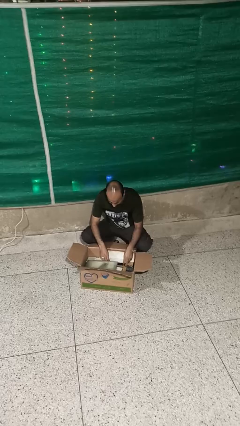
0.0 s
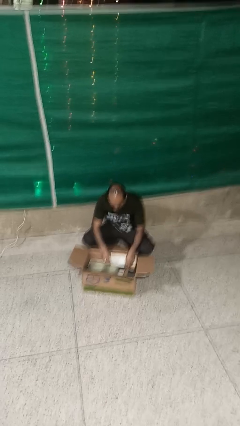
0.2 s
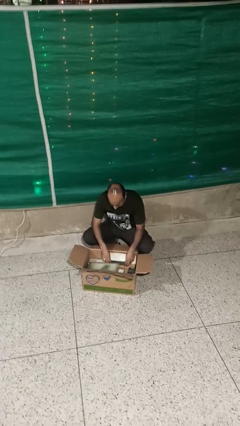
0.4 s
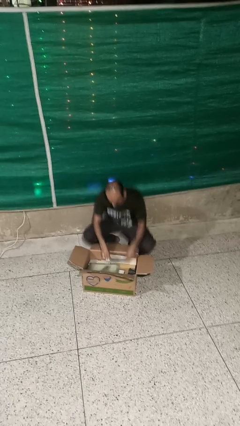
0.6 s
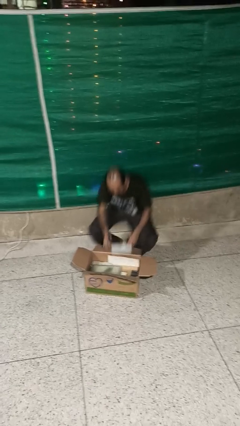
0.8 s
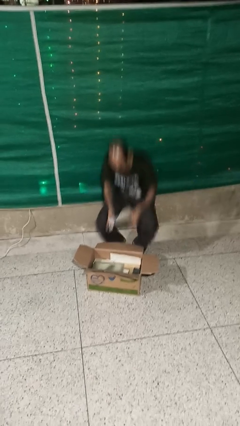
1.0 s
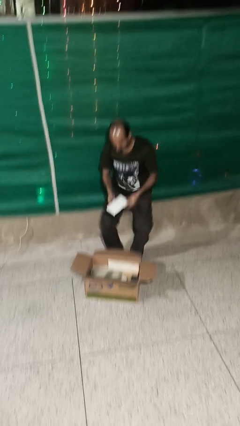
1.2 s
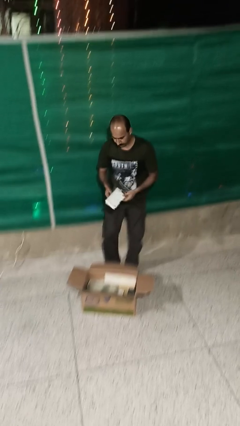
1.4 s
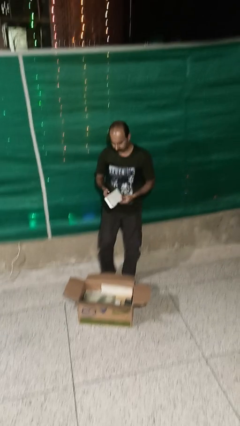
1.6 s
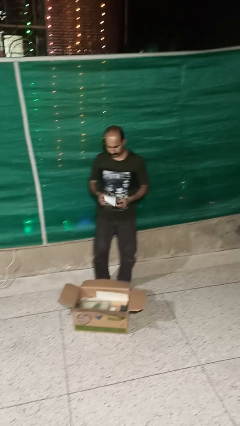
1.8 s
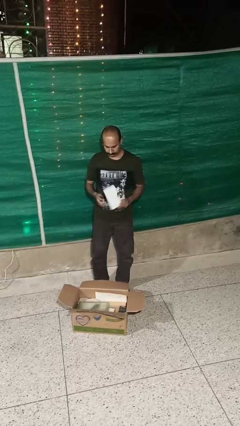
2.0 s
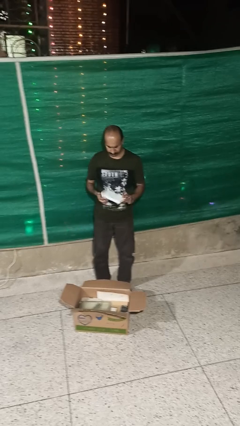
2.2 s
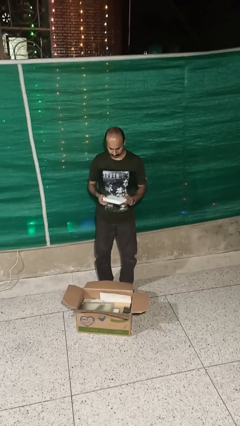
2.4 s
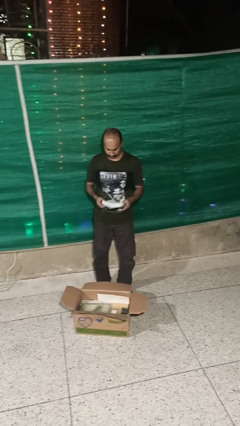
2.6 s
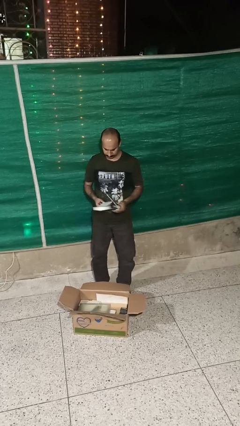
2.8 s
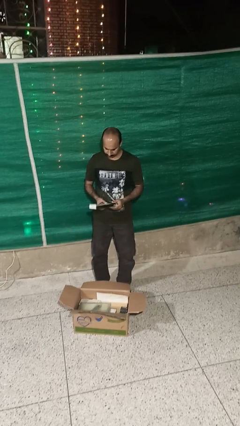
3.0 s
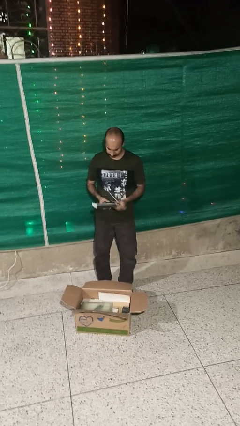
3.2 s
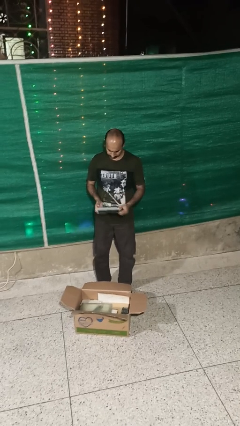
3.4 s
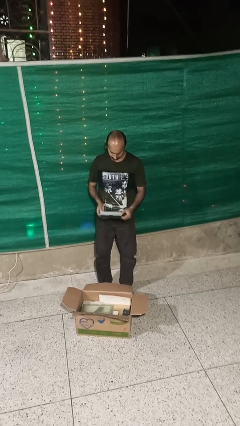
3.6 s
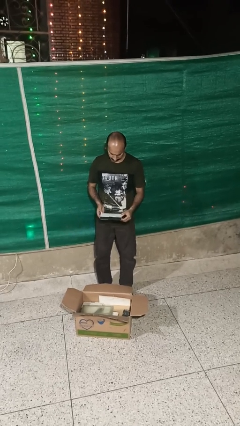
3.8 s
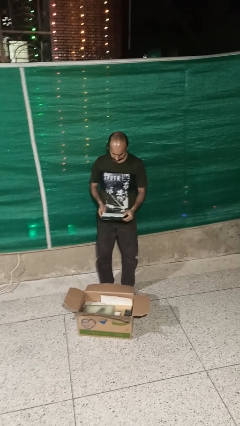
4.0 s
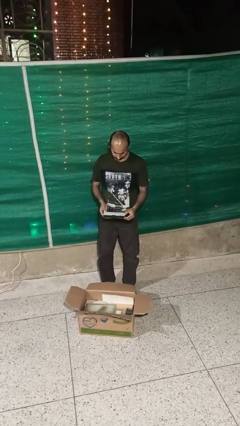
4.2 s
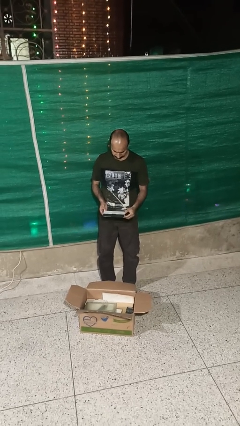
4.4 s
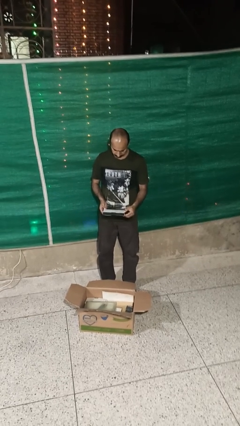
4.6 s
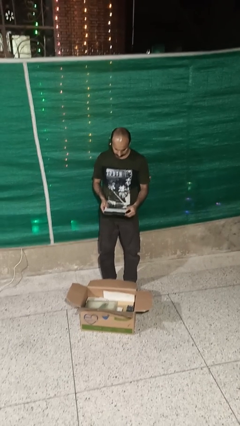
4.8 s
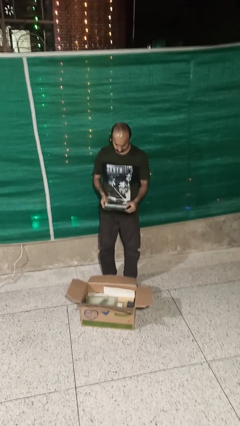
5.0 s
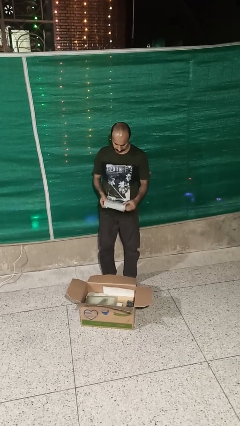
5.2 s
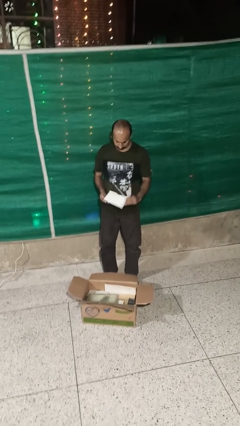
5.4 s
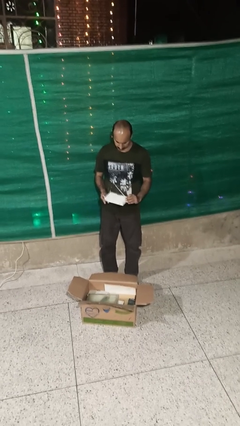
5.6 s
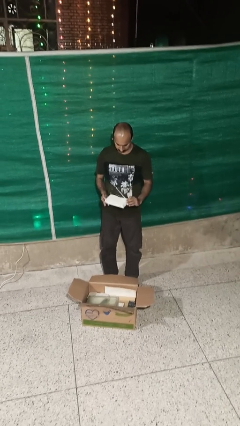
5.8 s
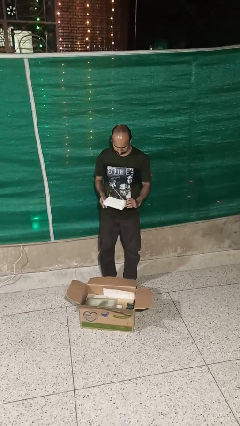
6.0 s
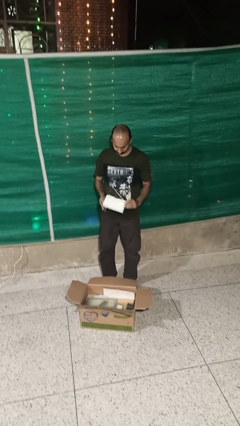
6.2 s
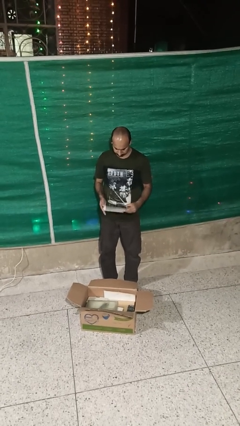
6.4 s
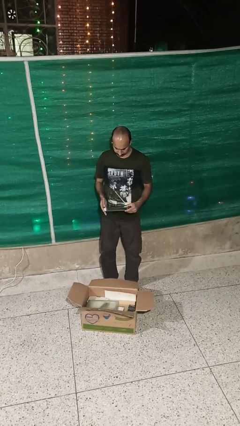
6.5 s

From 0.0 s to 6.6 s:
person takes object from box

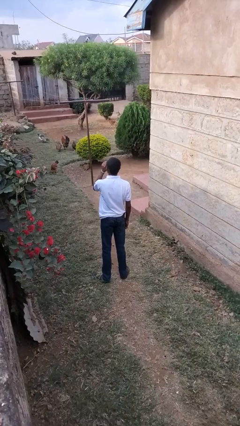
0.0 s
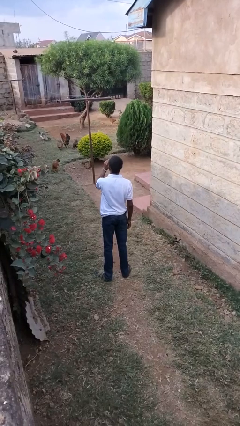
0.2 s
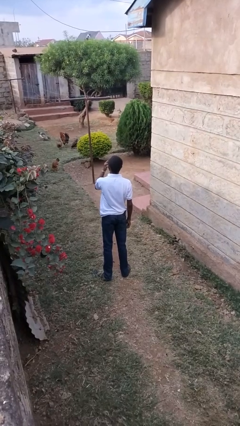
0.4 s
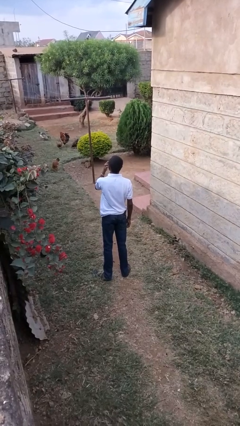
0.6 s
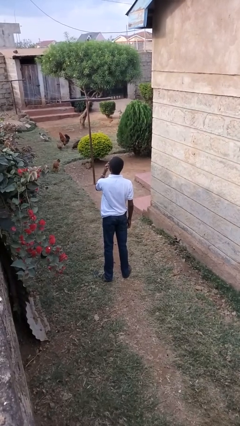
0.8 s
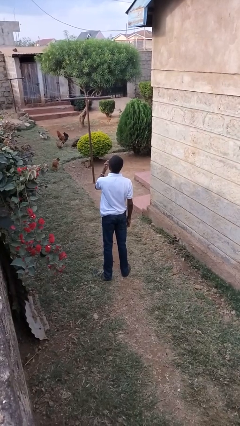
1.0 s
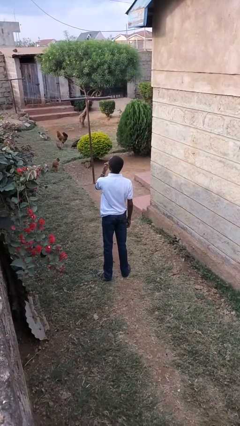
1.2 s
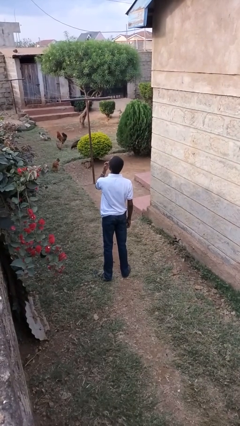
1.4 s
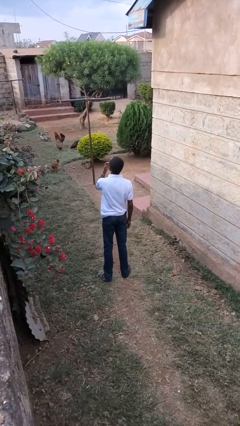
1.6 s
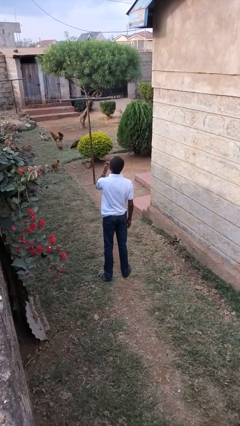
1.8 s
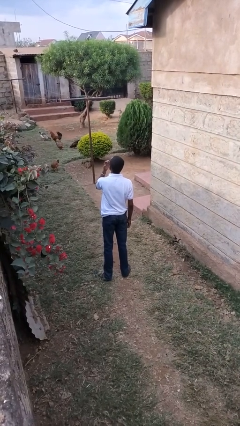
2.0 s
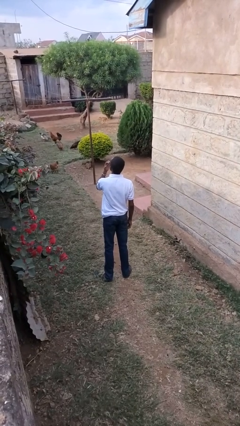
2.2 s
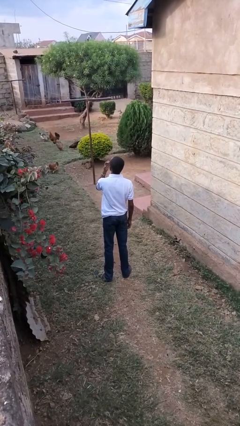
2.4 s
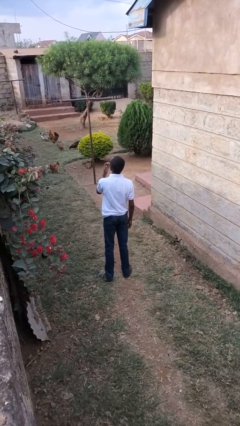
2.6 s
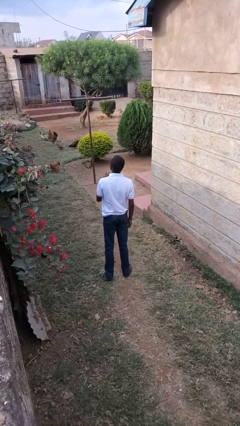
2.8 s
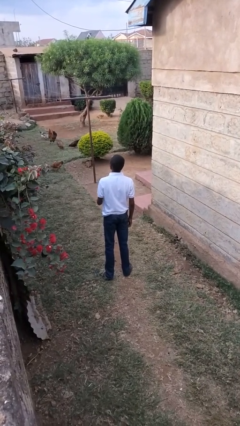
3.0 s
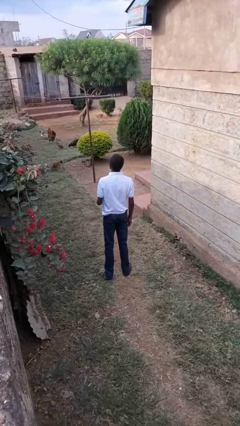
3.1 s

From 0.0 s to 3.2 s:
person licks fingers

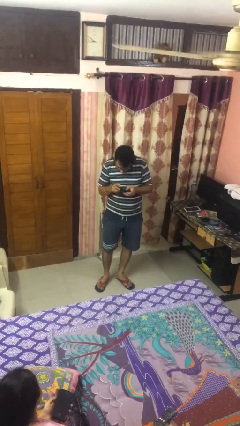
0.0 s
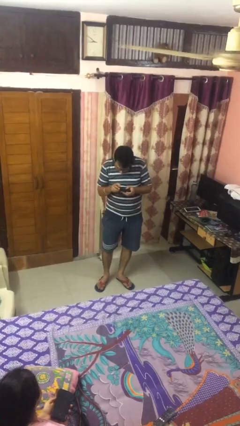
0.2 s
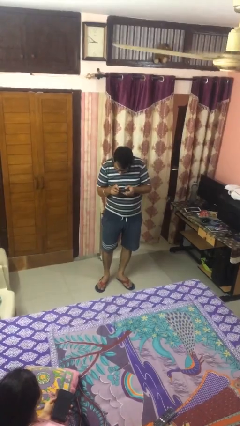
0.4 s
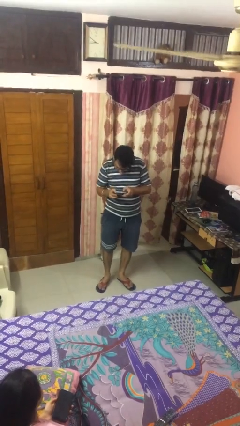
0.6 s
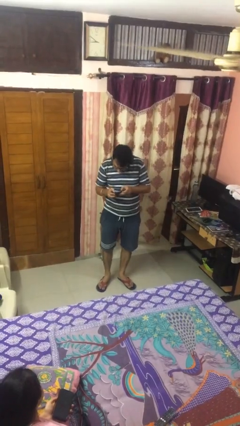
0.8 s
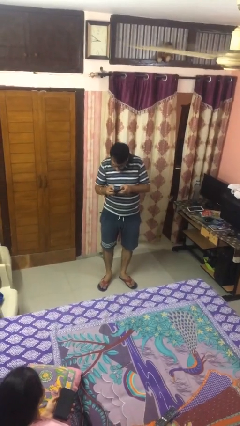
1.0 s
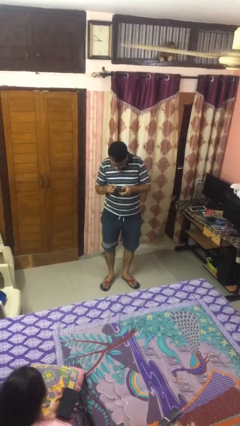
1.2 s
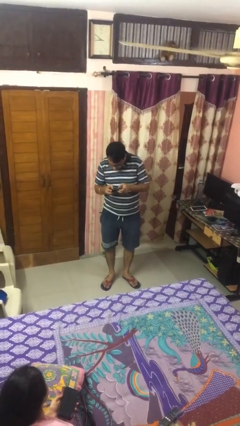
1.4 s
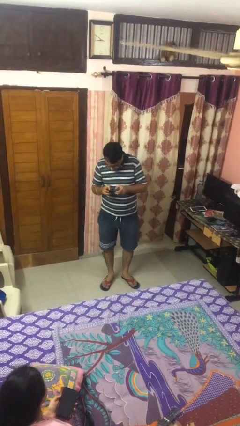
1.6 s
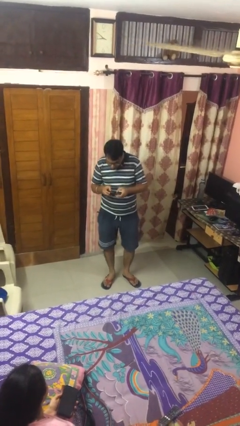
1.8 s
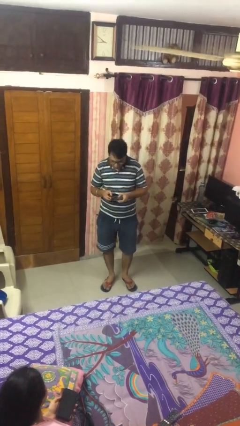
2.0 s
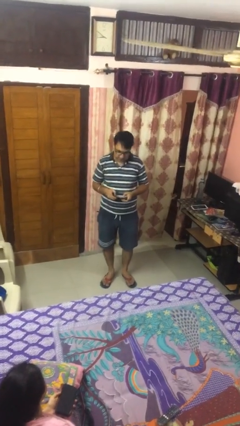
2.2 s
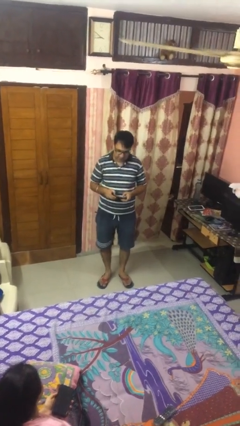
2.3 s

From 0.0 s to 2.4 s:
person interacts with handheld game

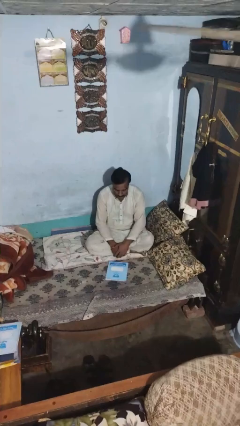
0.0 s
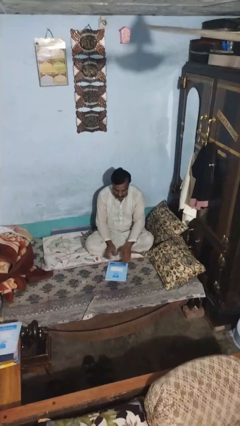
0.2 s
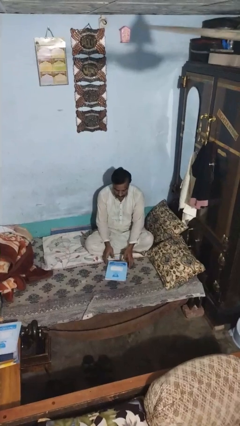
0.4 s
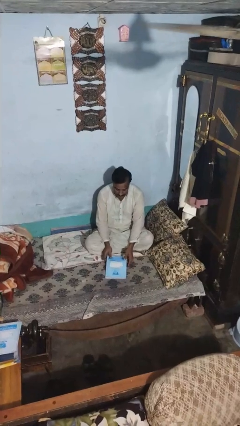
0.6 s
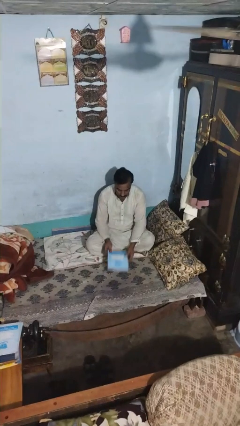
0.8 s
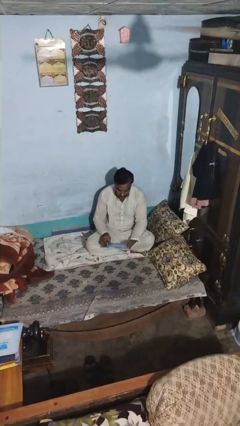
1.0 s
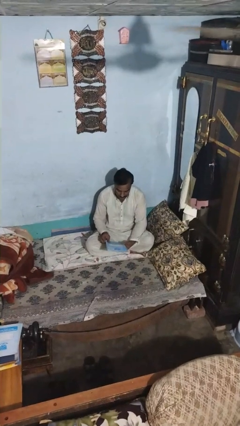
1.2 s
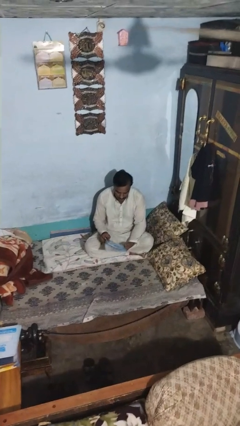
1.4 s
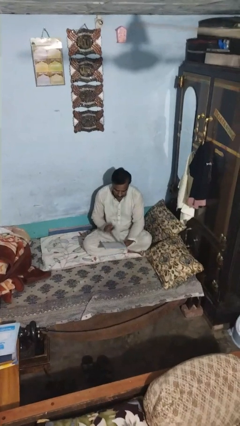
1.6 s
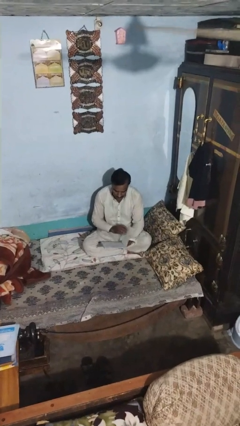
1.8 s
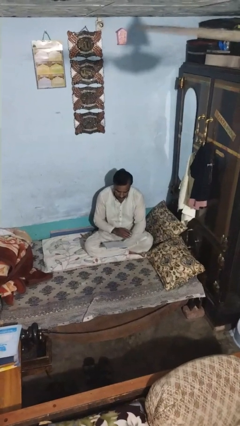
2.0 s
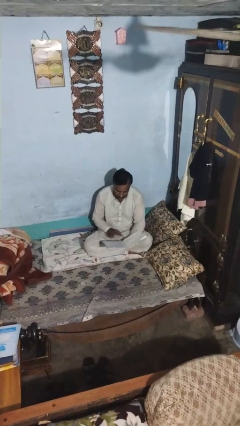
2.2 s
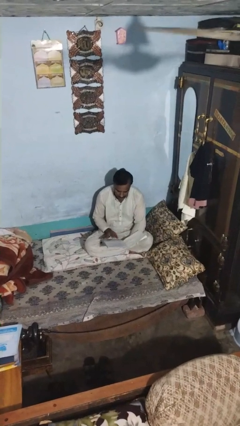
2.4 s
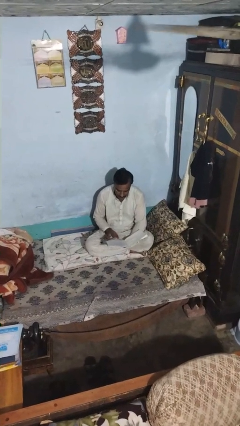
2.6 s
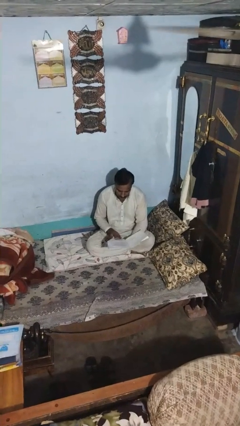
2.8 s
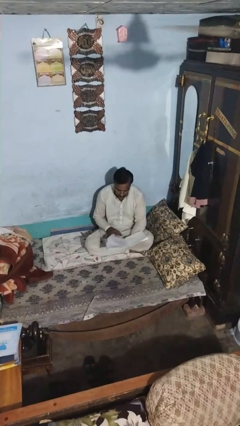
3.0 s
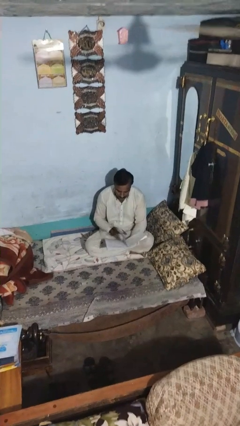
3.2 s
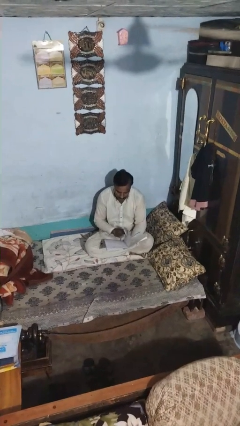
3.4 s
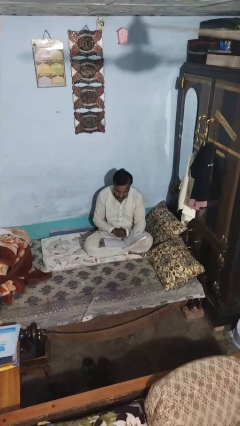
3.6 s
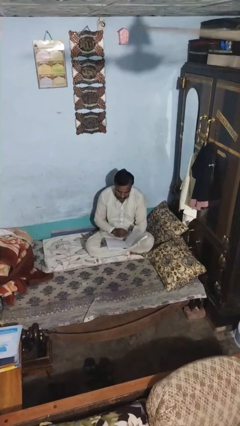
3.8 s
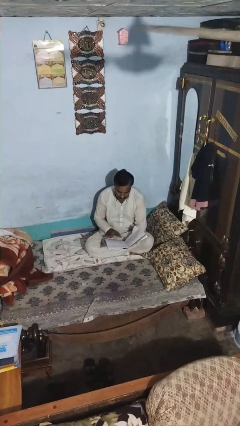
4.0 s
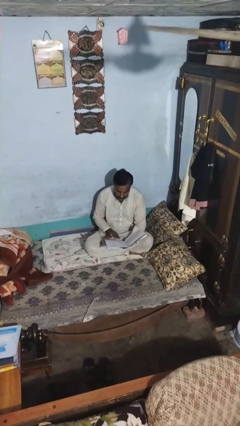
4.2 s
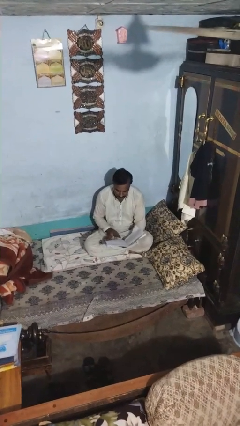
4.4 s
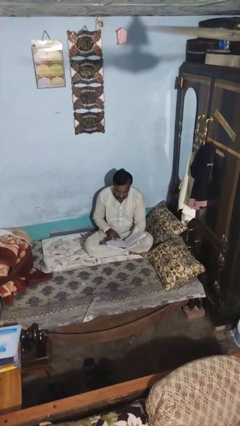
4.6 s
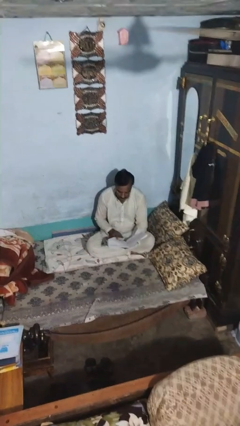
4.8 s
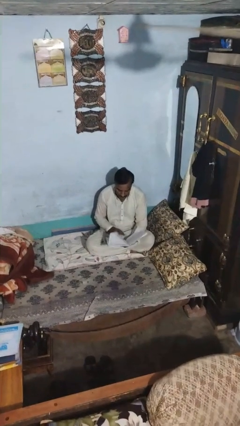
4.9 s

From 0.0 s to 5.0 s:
person reads book

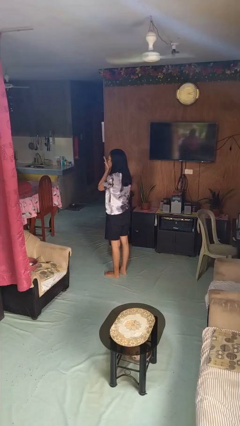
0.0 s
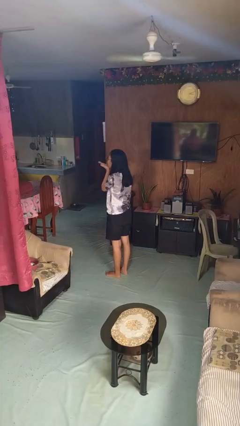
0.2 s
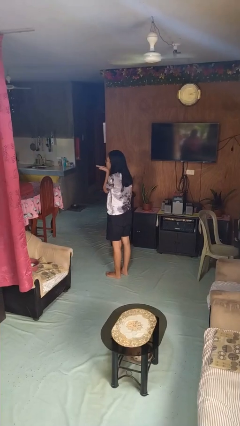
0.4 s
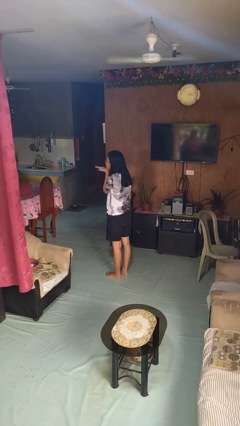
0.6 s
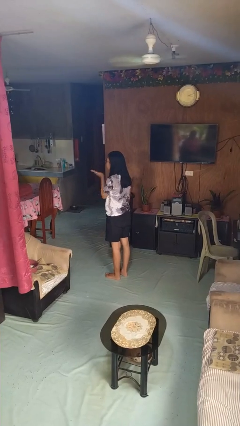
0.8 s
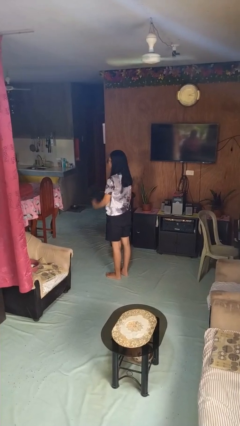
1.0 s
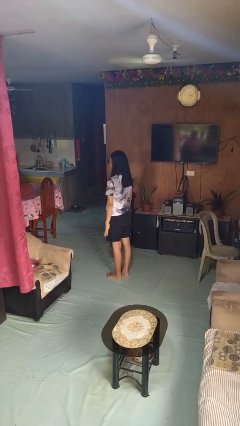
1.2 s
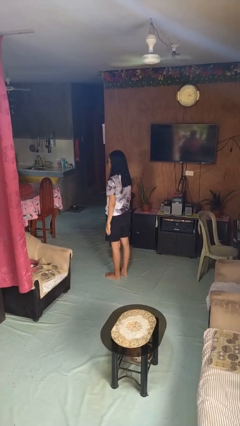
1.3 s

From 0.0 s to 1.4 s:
person gestures blow kiss
